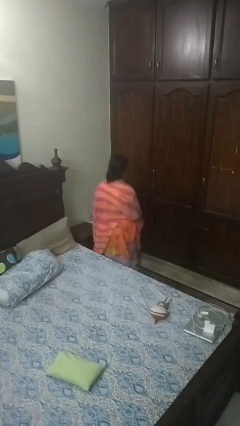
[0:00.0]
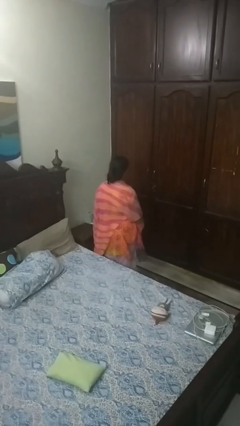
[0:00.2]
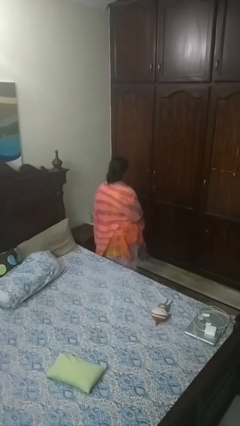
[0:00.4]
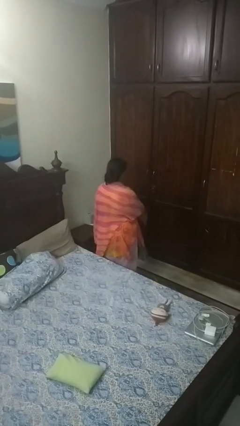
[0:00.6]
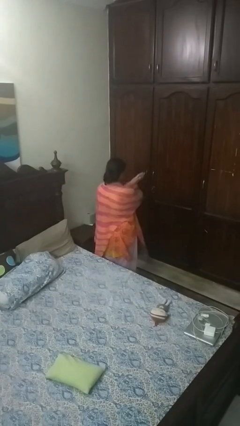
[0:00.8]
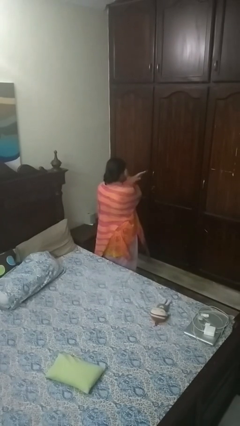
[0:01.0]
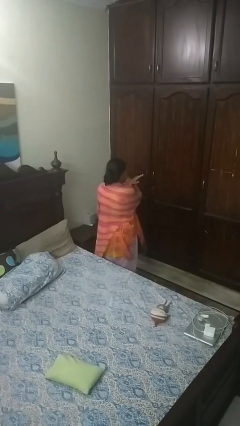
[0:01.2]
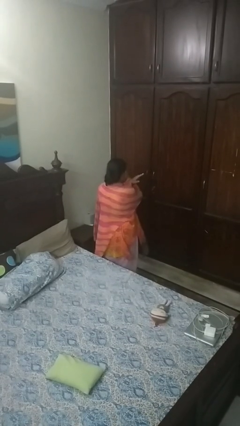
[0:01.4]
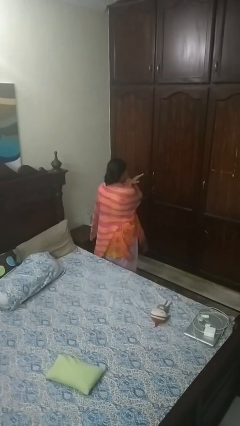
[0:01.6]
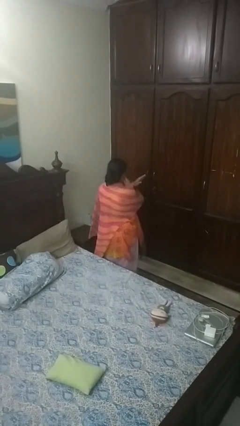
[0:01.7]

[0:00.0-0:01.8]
person gestures arms x

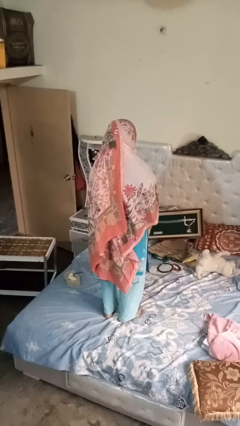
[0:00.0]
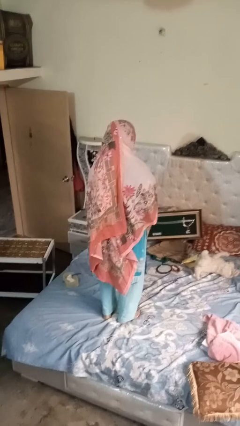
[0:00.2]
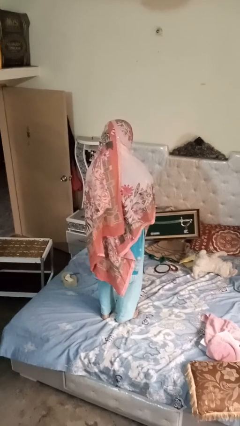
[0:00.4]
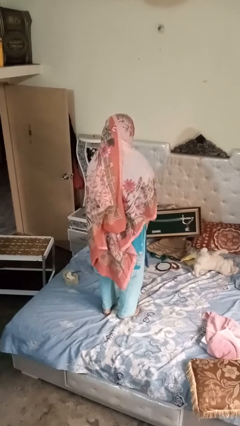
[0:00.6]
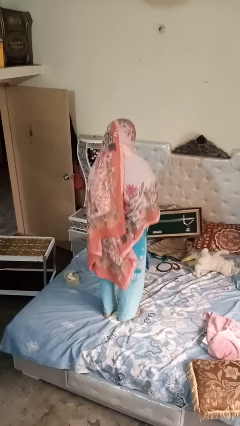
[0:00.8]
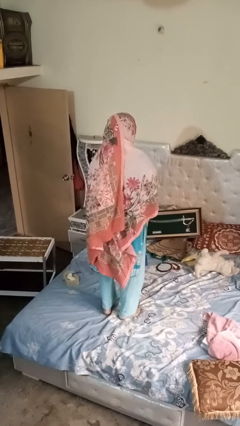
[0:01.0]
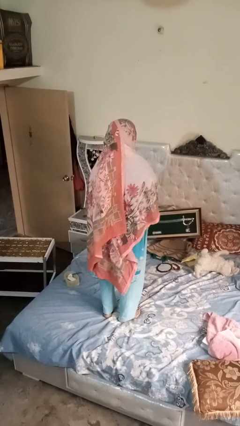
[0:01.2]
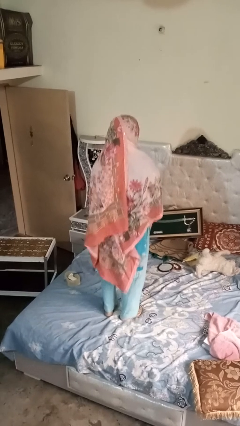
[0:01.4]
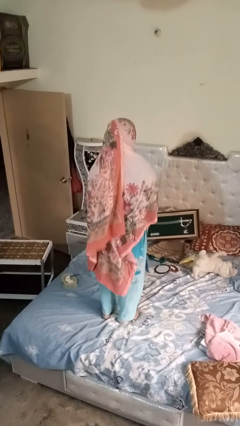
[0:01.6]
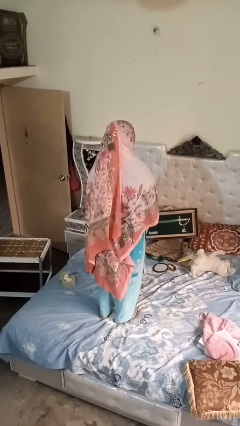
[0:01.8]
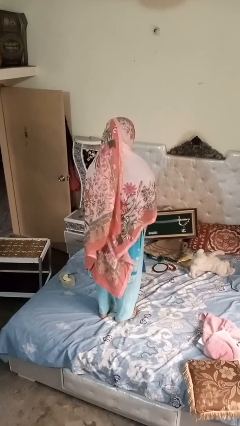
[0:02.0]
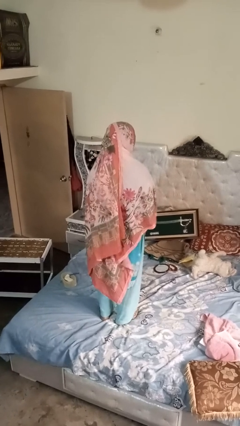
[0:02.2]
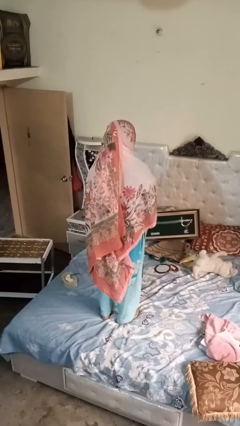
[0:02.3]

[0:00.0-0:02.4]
person jumps on bed

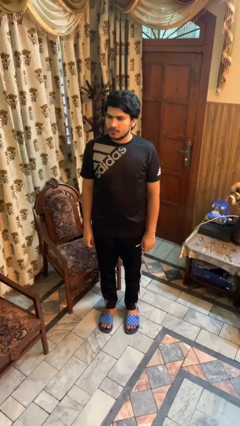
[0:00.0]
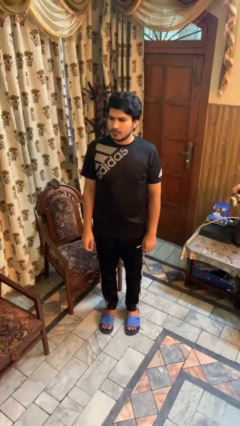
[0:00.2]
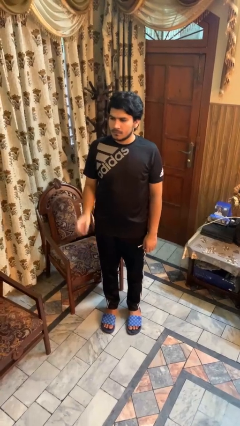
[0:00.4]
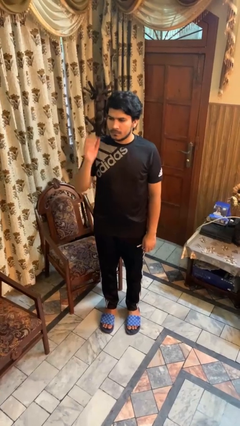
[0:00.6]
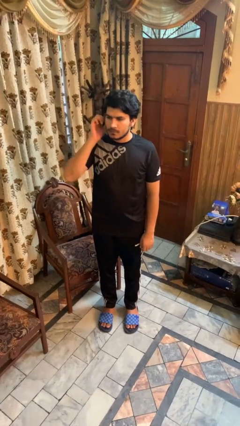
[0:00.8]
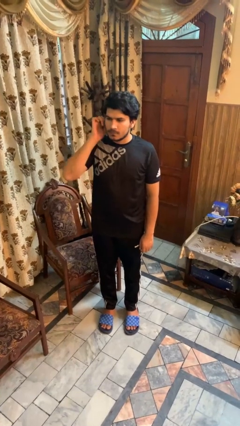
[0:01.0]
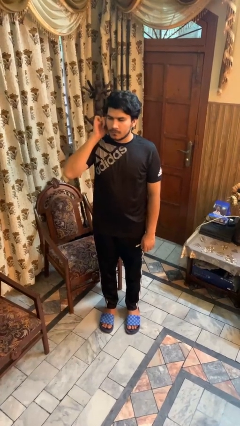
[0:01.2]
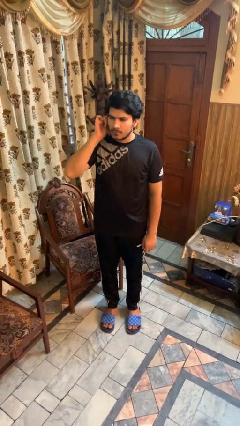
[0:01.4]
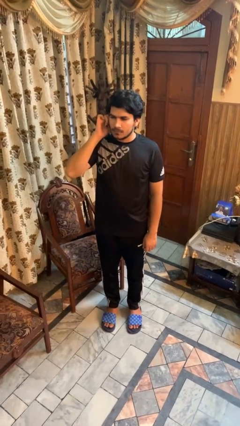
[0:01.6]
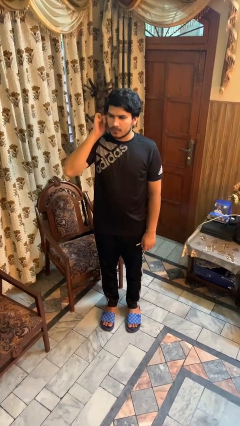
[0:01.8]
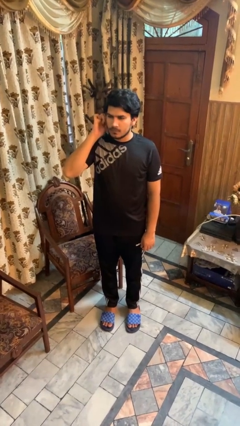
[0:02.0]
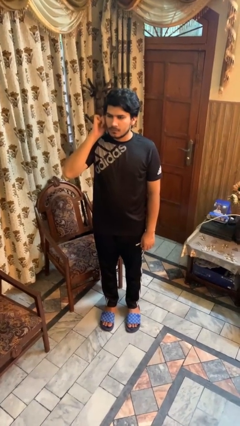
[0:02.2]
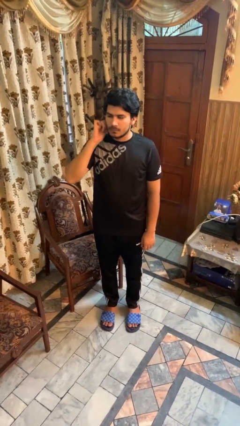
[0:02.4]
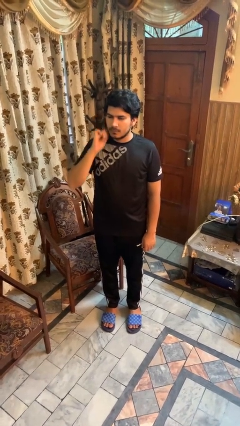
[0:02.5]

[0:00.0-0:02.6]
person touches earlobe

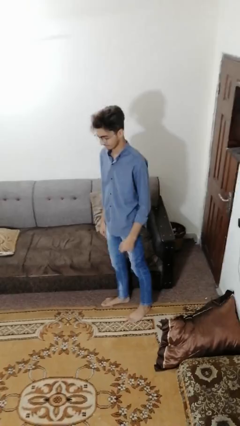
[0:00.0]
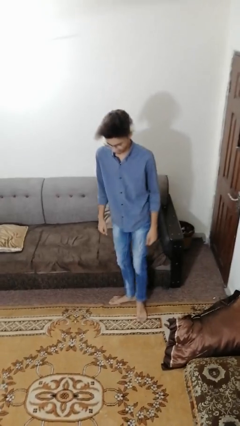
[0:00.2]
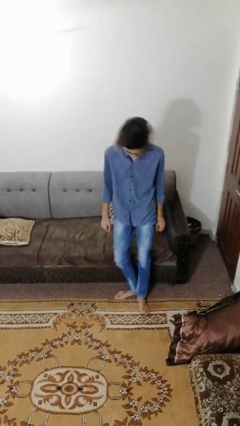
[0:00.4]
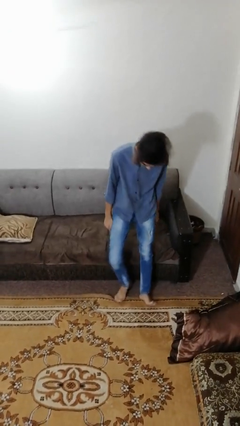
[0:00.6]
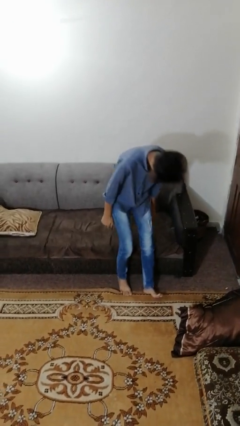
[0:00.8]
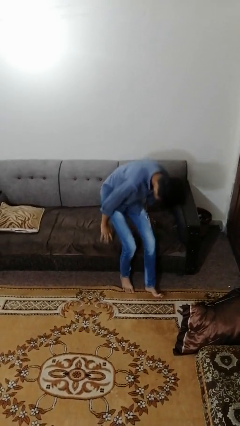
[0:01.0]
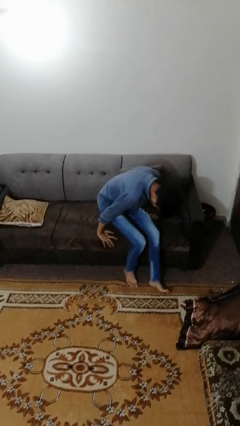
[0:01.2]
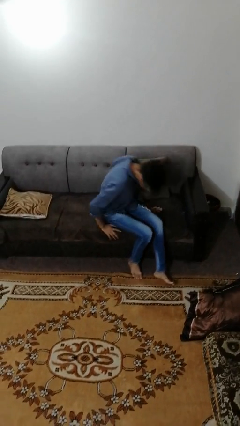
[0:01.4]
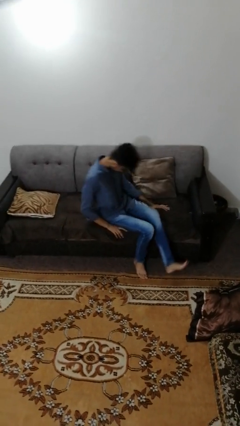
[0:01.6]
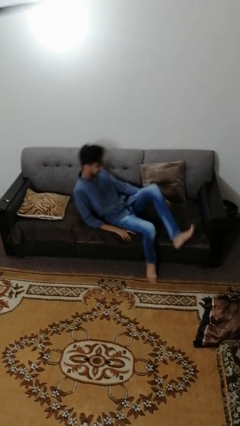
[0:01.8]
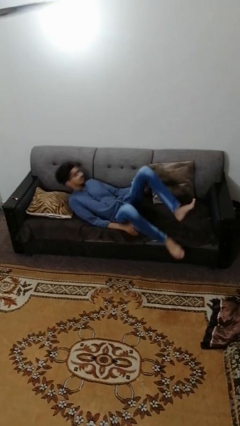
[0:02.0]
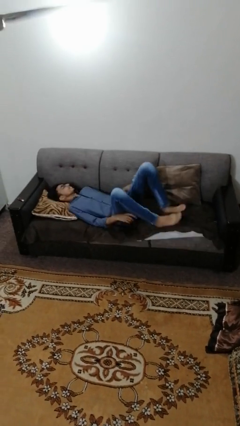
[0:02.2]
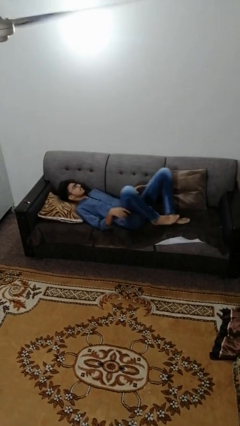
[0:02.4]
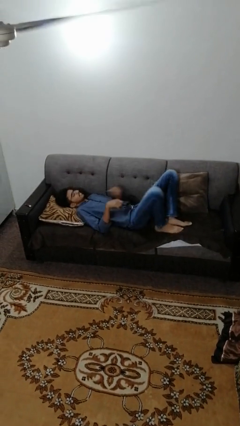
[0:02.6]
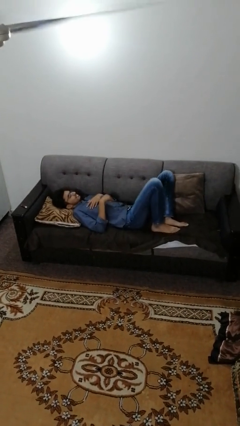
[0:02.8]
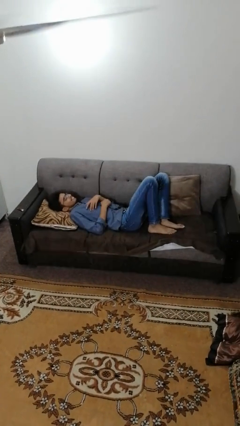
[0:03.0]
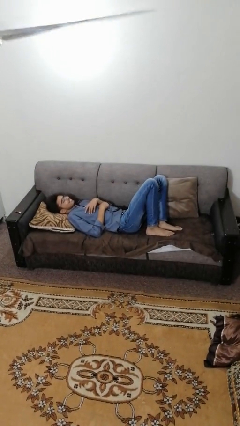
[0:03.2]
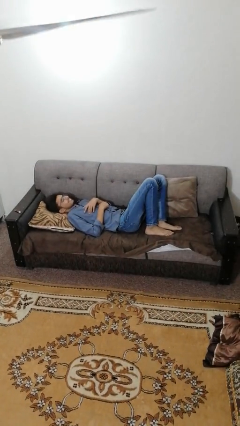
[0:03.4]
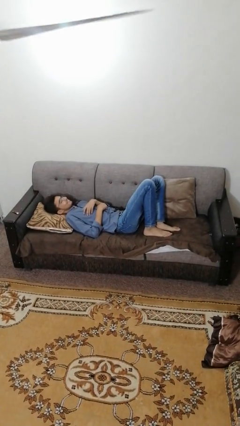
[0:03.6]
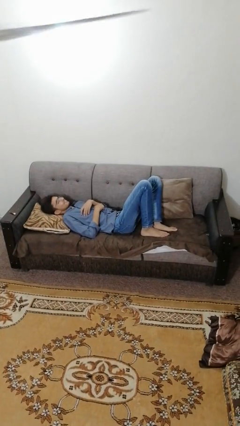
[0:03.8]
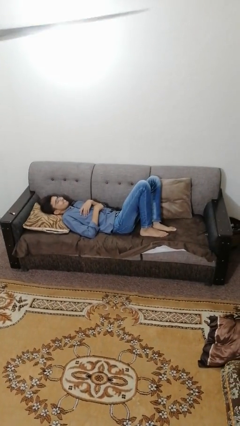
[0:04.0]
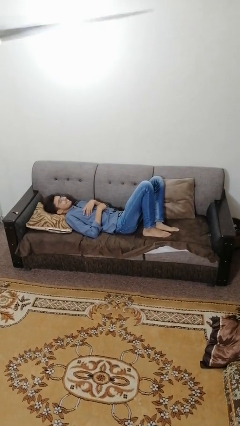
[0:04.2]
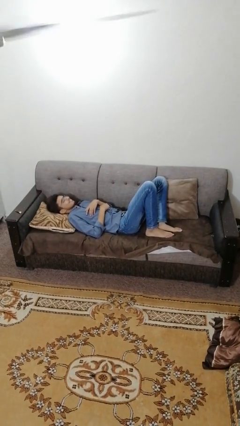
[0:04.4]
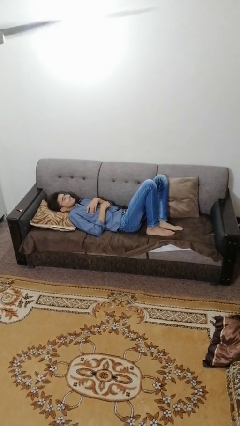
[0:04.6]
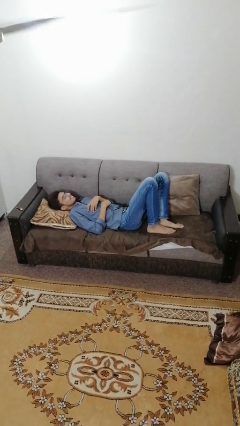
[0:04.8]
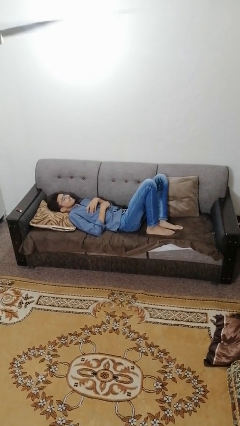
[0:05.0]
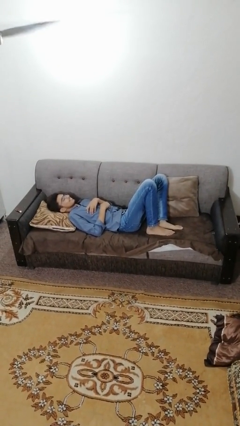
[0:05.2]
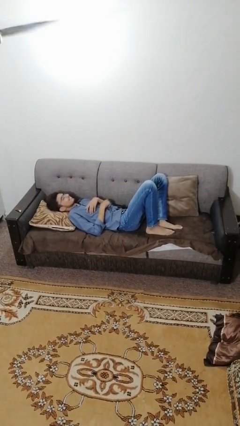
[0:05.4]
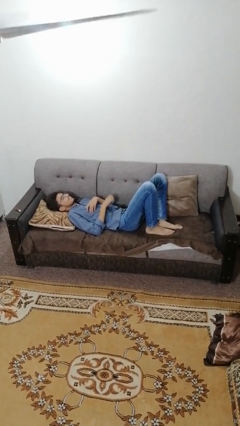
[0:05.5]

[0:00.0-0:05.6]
person lies down on couch

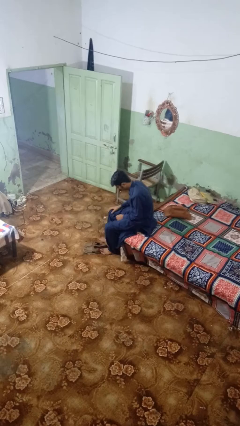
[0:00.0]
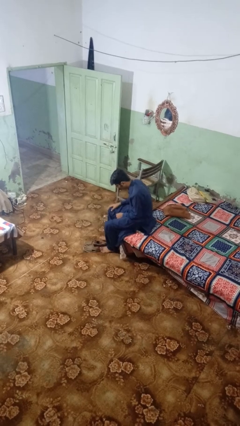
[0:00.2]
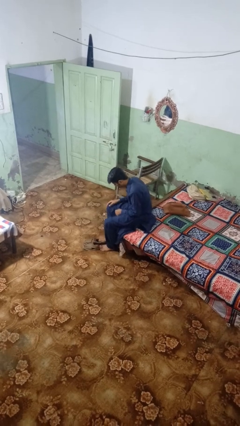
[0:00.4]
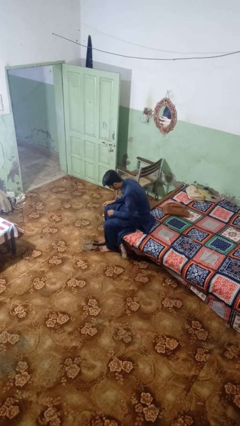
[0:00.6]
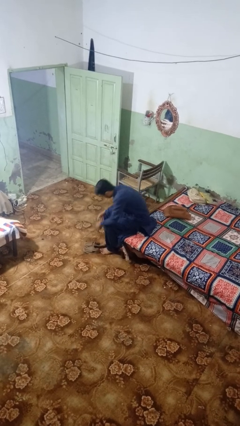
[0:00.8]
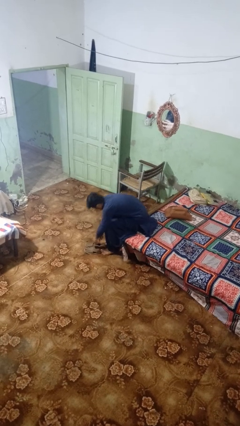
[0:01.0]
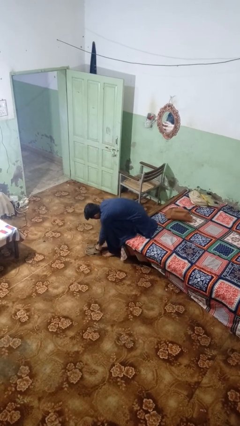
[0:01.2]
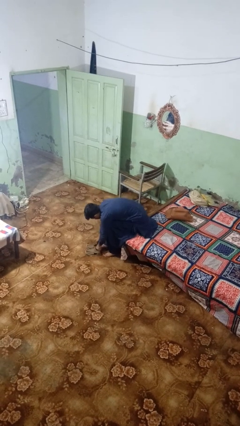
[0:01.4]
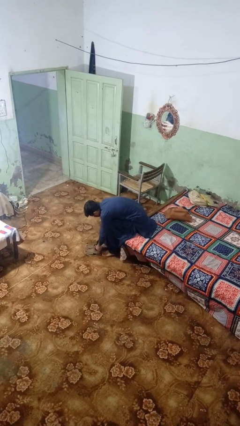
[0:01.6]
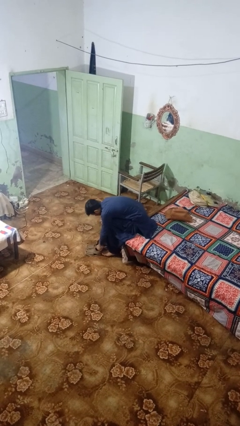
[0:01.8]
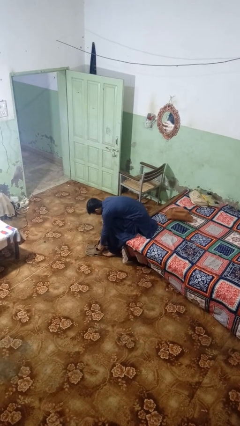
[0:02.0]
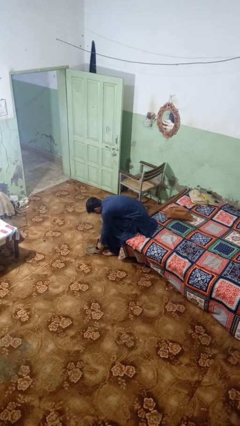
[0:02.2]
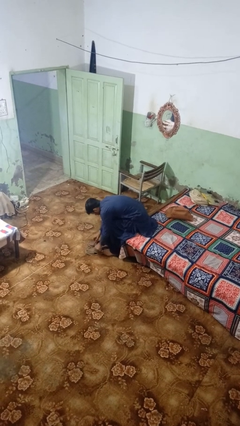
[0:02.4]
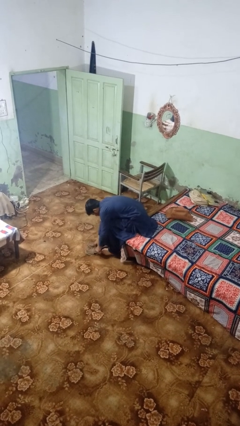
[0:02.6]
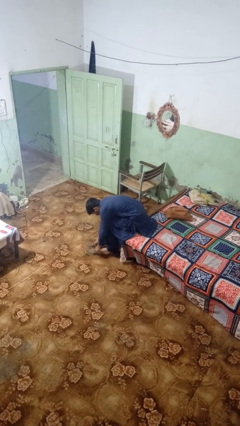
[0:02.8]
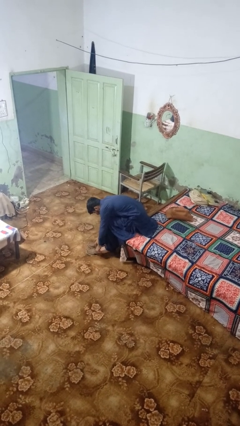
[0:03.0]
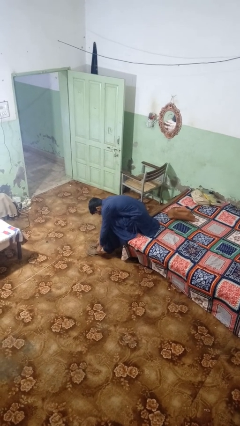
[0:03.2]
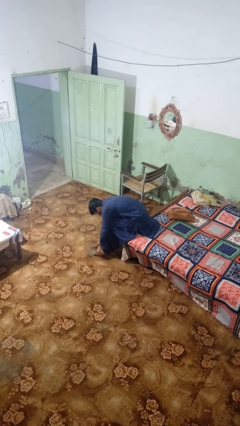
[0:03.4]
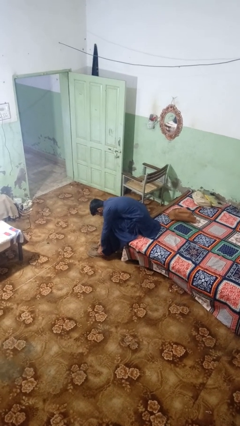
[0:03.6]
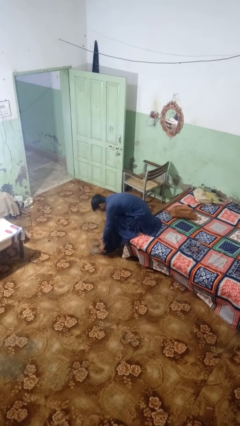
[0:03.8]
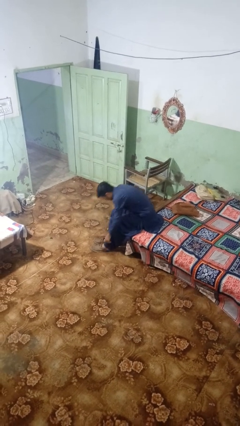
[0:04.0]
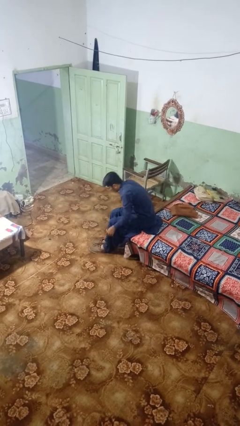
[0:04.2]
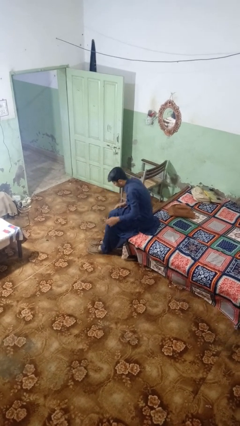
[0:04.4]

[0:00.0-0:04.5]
person puts on shoes
